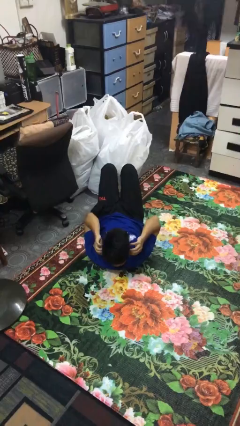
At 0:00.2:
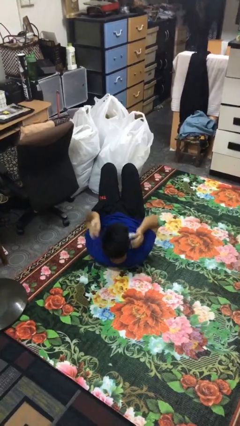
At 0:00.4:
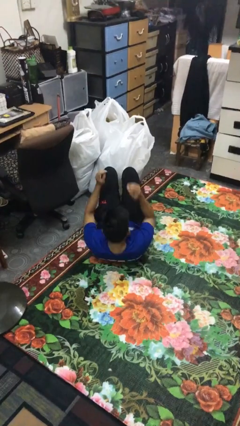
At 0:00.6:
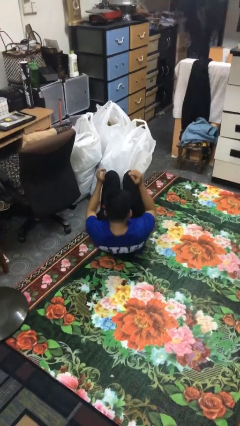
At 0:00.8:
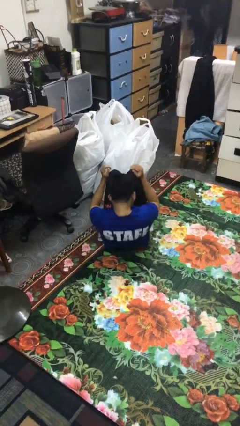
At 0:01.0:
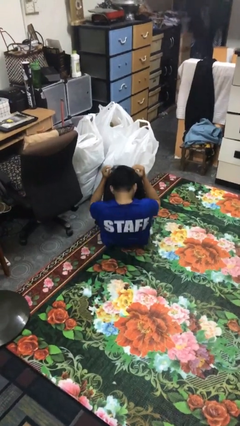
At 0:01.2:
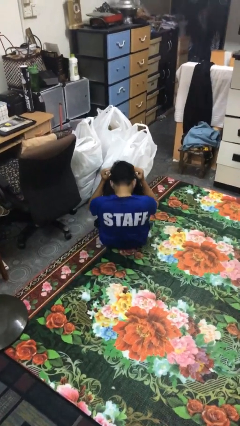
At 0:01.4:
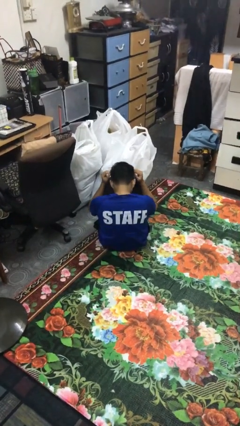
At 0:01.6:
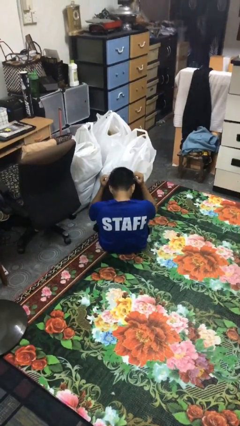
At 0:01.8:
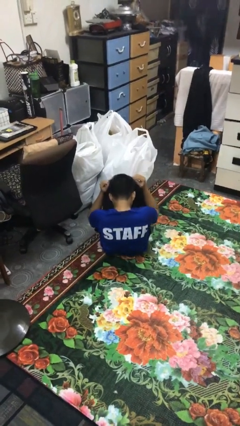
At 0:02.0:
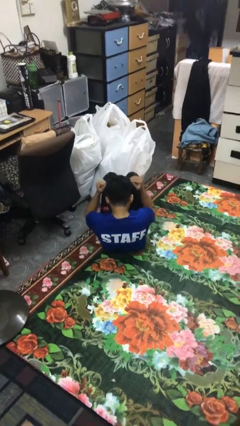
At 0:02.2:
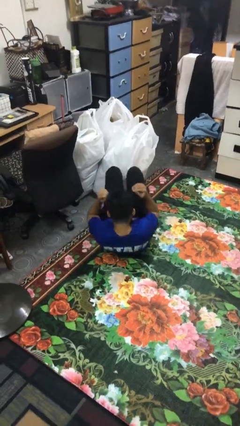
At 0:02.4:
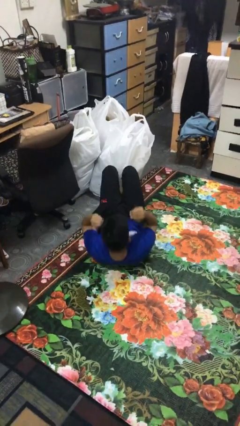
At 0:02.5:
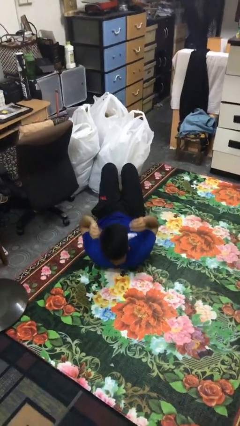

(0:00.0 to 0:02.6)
person exercises with situp

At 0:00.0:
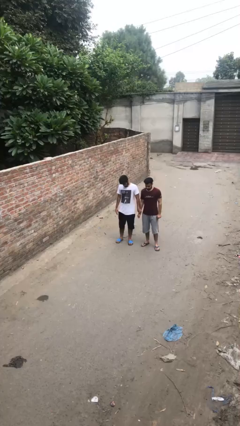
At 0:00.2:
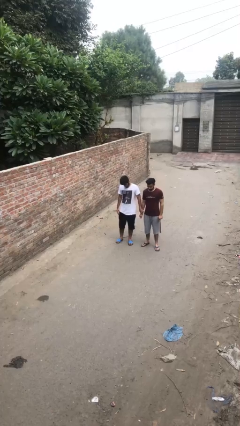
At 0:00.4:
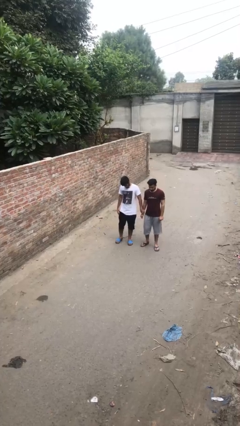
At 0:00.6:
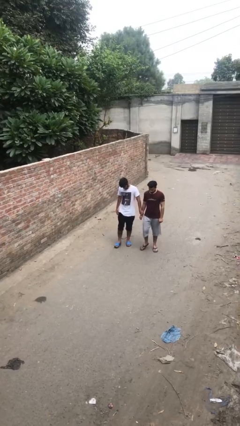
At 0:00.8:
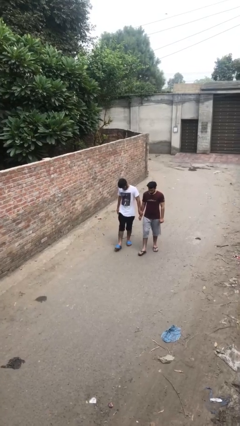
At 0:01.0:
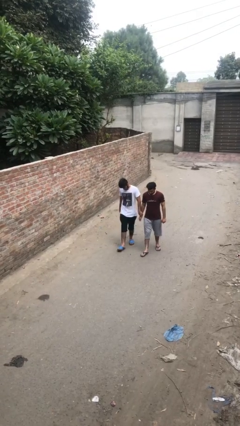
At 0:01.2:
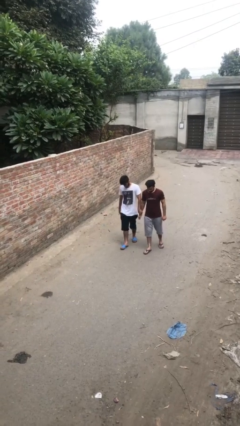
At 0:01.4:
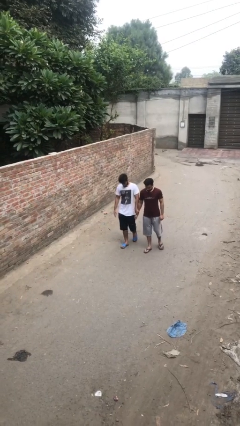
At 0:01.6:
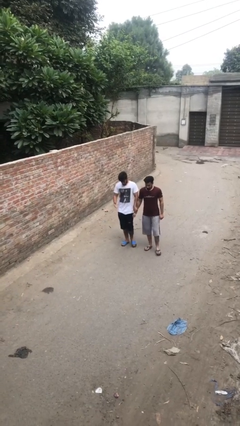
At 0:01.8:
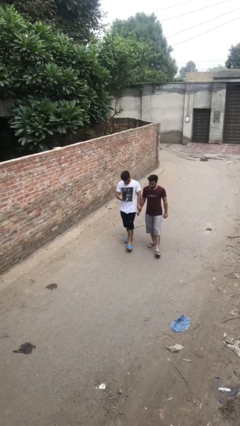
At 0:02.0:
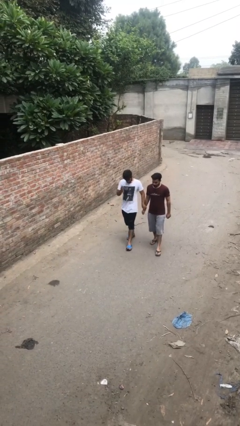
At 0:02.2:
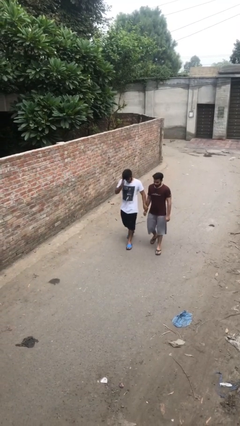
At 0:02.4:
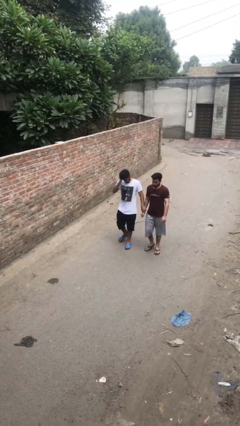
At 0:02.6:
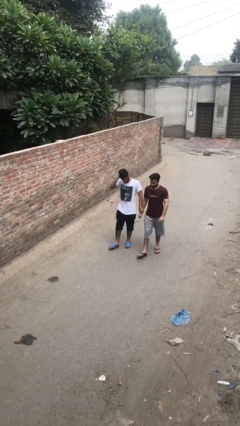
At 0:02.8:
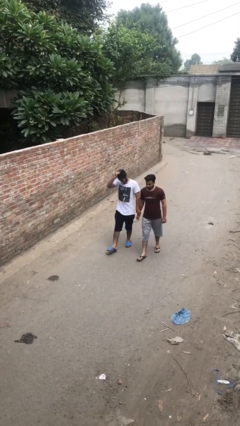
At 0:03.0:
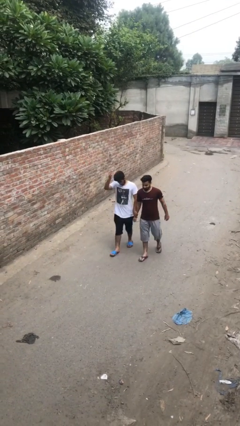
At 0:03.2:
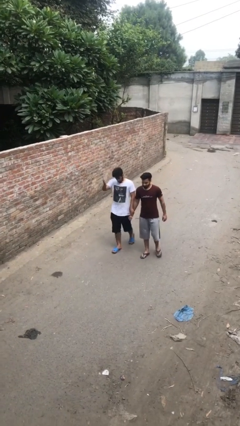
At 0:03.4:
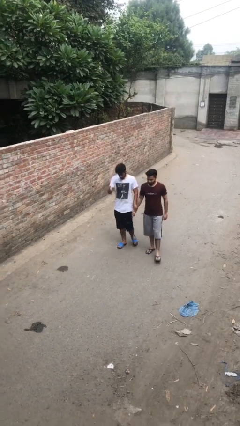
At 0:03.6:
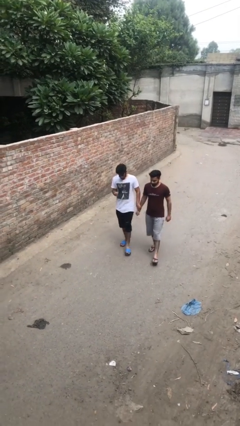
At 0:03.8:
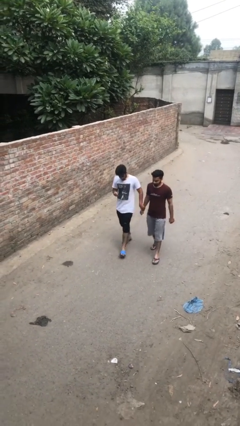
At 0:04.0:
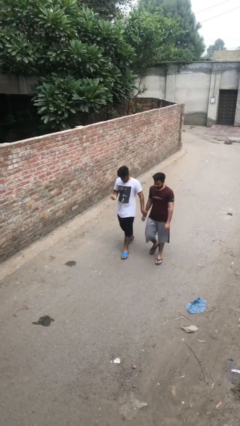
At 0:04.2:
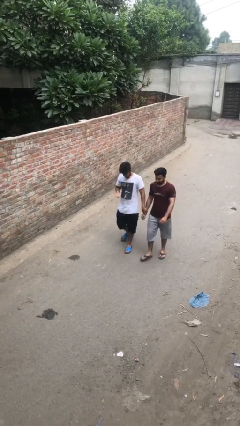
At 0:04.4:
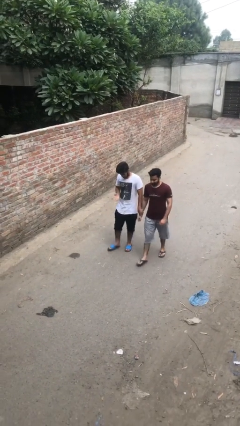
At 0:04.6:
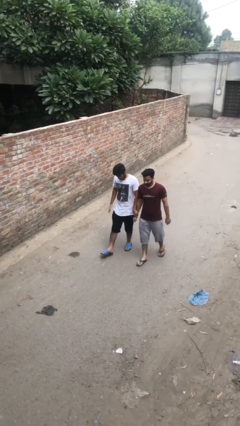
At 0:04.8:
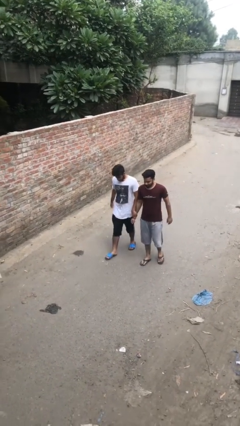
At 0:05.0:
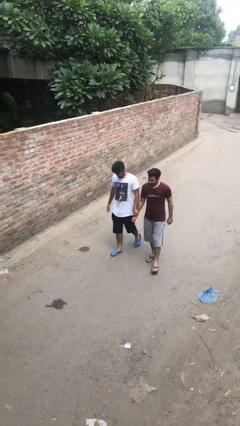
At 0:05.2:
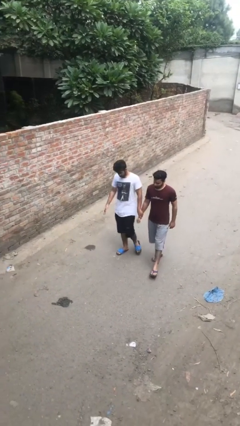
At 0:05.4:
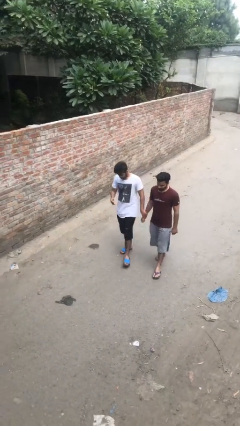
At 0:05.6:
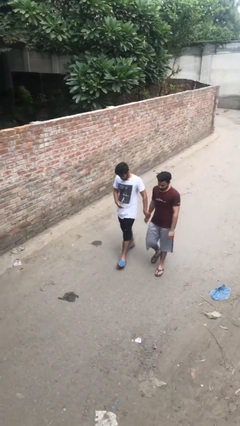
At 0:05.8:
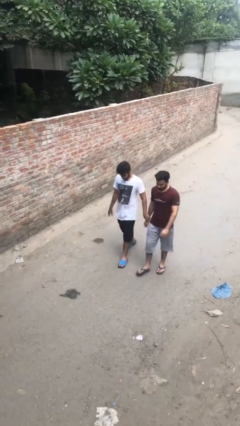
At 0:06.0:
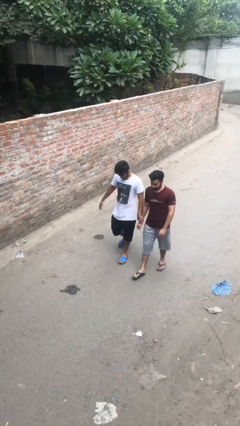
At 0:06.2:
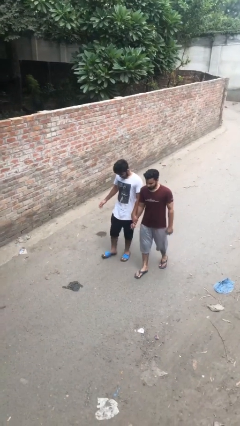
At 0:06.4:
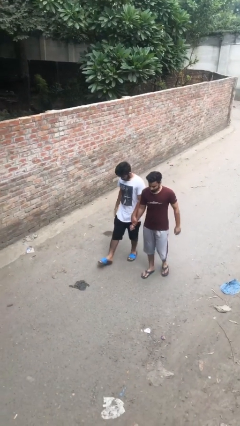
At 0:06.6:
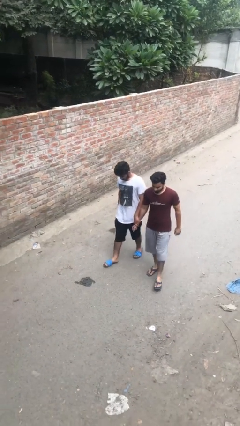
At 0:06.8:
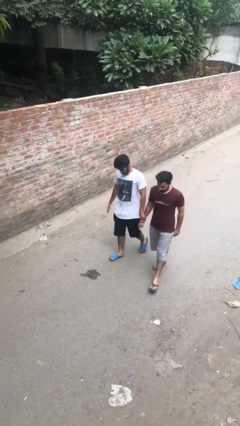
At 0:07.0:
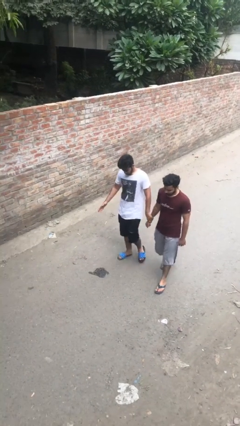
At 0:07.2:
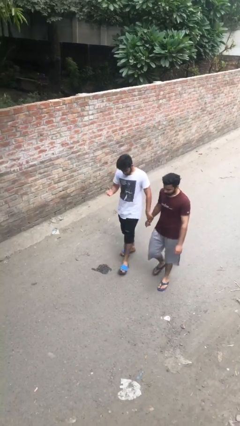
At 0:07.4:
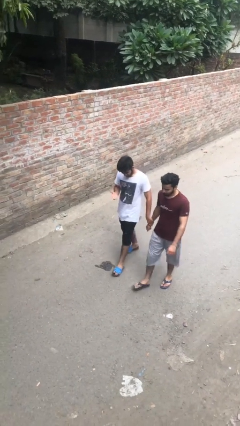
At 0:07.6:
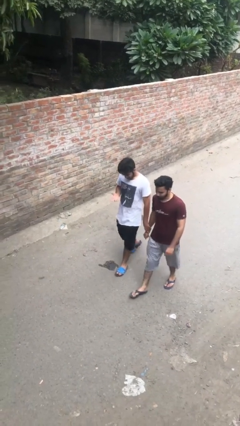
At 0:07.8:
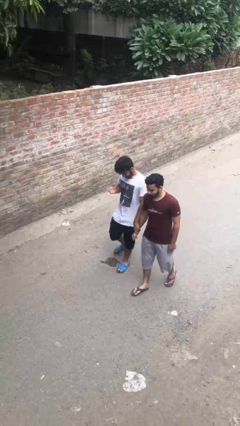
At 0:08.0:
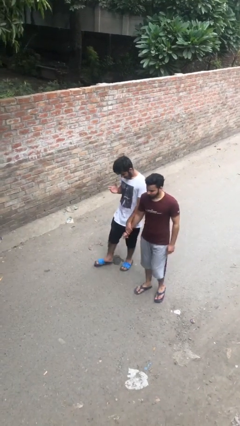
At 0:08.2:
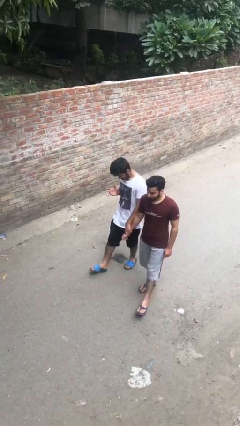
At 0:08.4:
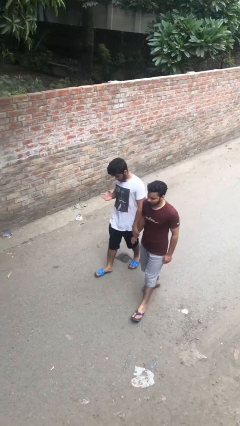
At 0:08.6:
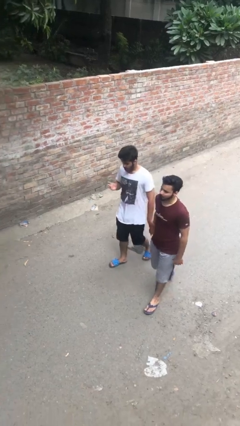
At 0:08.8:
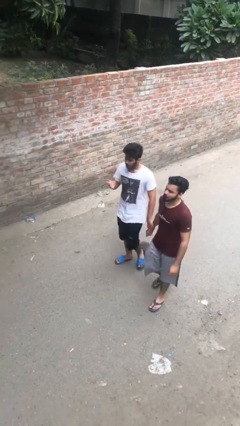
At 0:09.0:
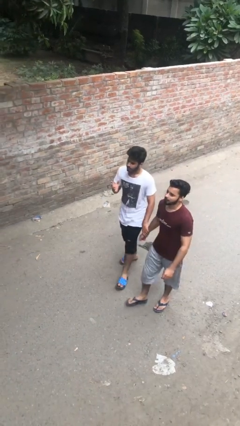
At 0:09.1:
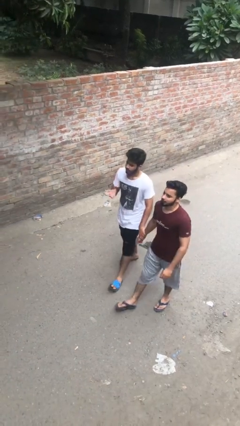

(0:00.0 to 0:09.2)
person holds hand

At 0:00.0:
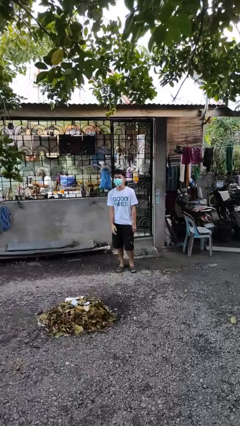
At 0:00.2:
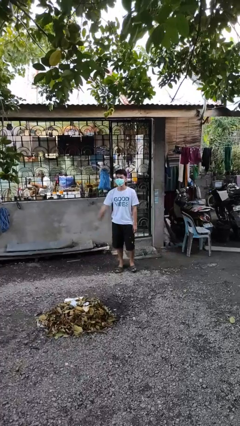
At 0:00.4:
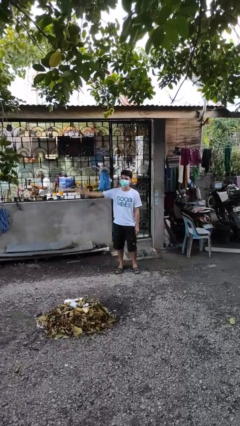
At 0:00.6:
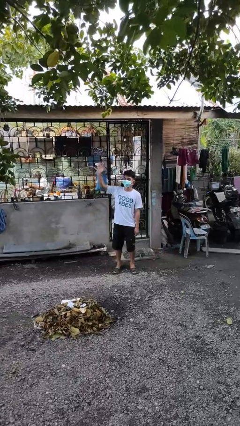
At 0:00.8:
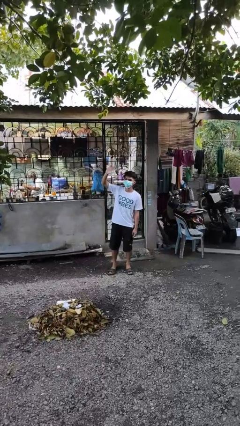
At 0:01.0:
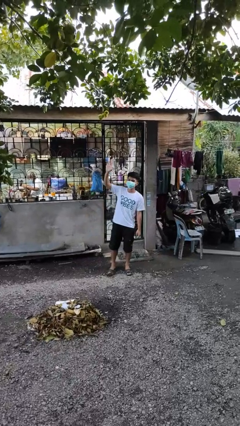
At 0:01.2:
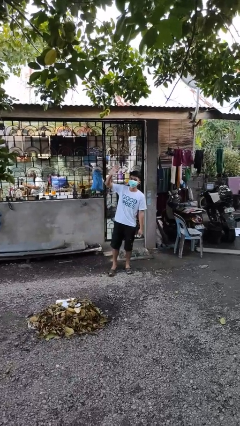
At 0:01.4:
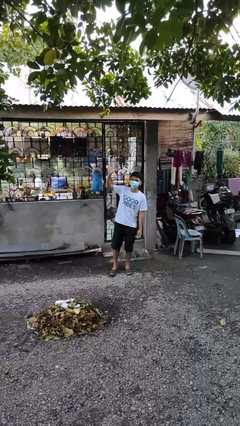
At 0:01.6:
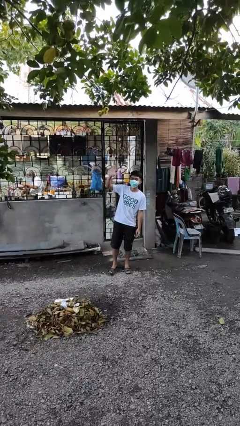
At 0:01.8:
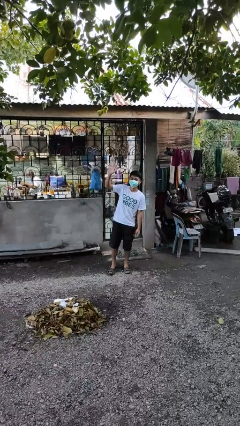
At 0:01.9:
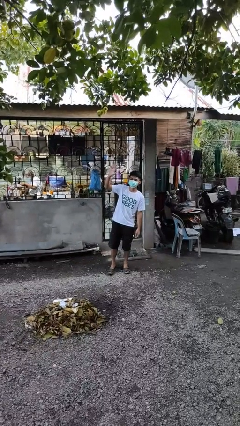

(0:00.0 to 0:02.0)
person waves at person

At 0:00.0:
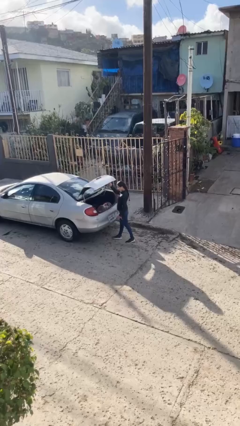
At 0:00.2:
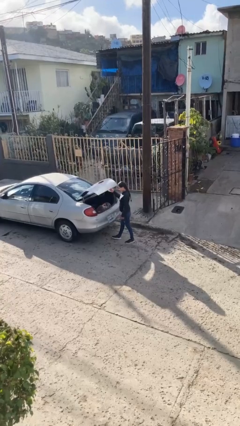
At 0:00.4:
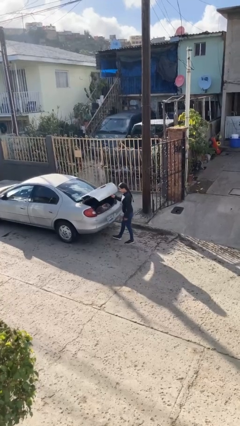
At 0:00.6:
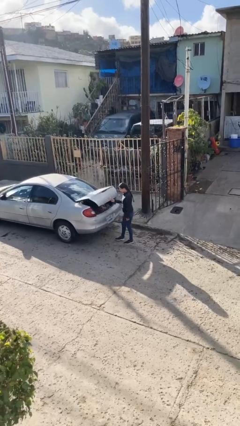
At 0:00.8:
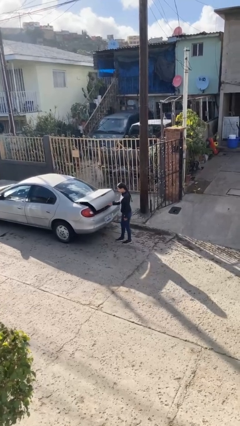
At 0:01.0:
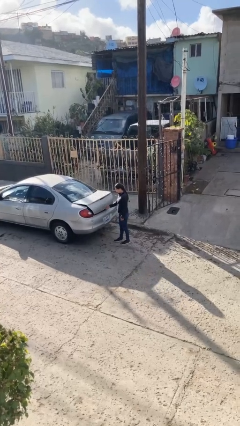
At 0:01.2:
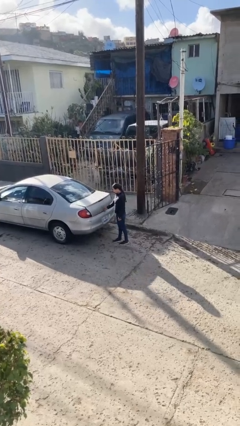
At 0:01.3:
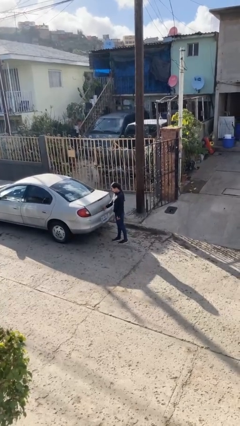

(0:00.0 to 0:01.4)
person closes car trunk

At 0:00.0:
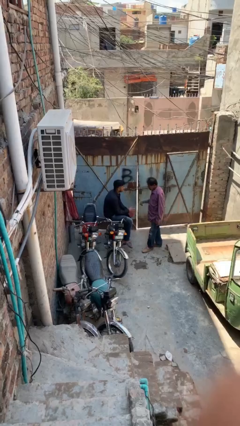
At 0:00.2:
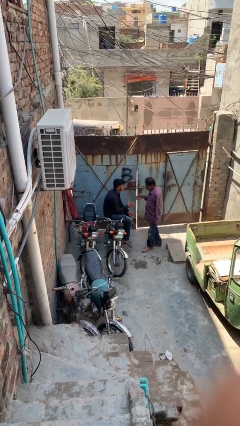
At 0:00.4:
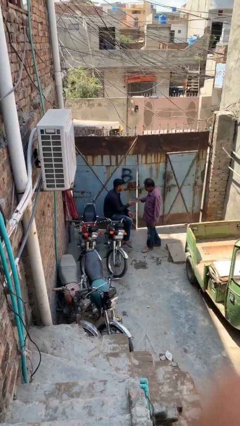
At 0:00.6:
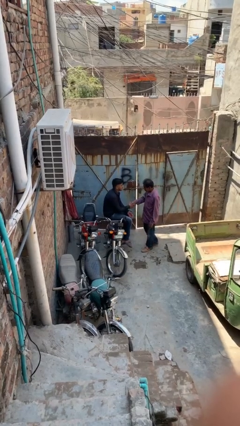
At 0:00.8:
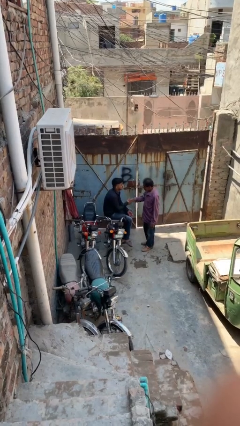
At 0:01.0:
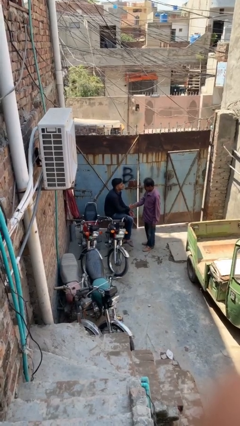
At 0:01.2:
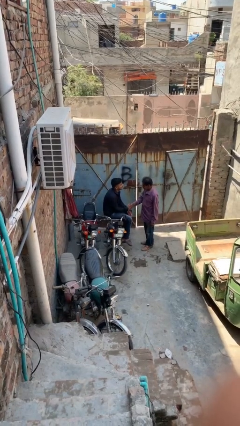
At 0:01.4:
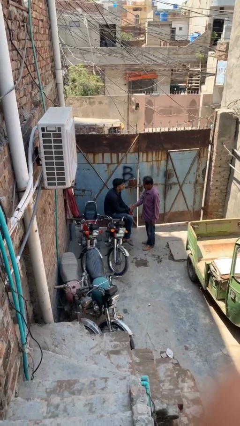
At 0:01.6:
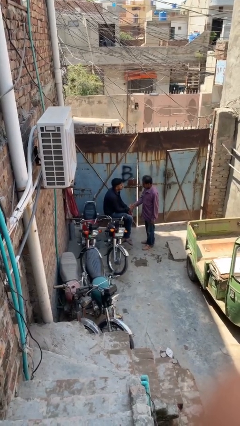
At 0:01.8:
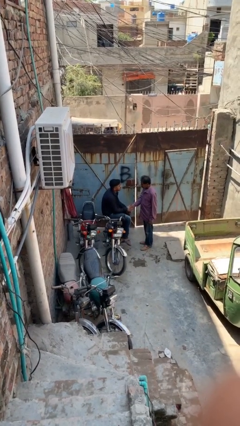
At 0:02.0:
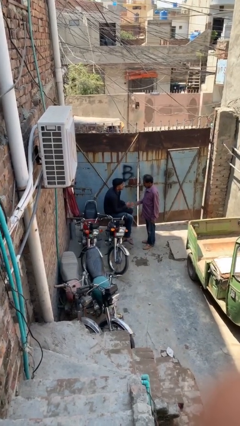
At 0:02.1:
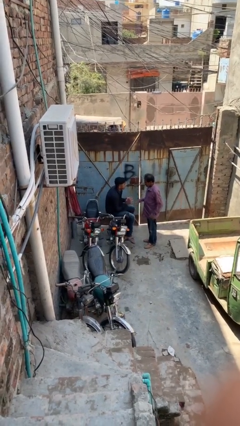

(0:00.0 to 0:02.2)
person shakes hand
